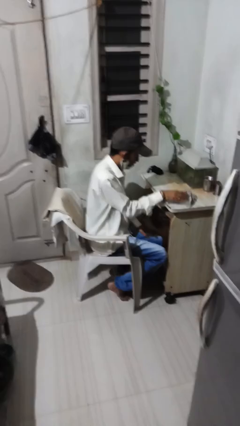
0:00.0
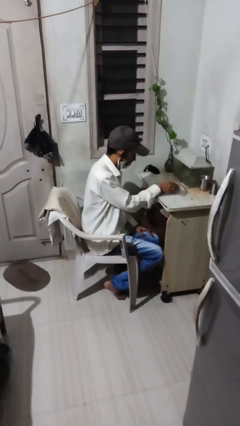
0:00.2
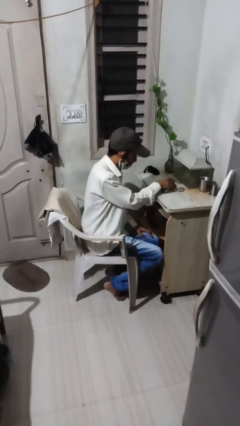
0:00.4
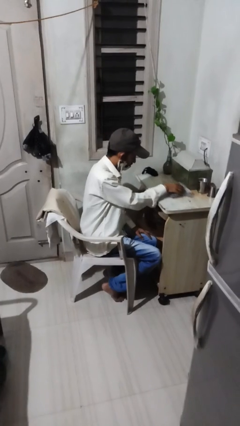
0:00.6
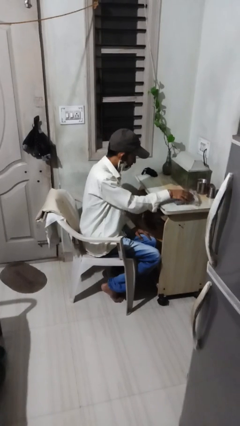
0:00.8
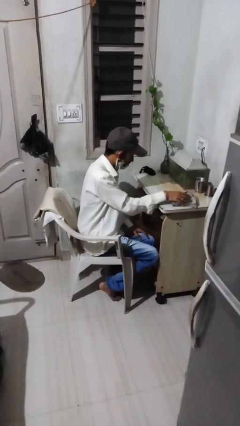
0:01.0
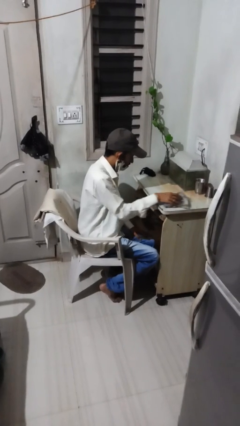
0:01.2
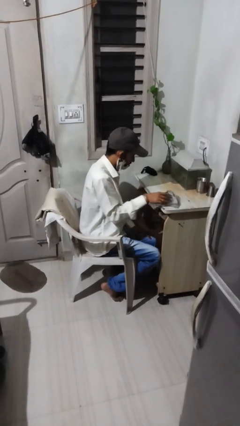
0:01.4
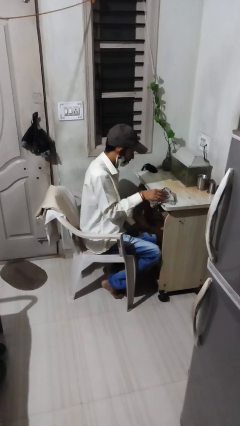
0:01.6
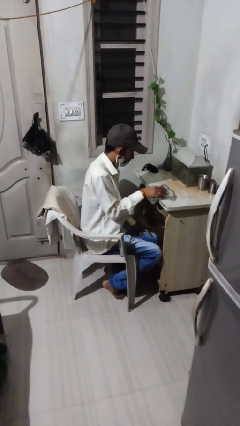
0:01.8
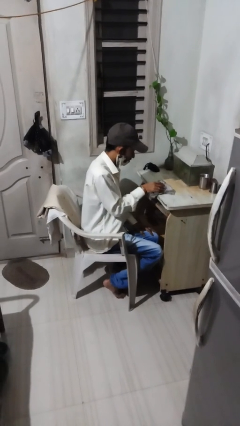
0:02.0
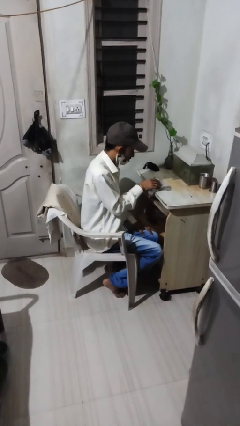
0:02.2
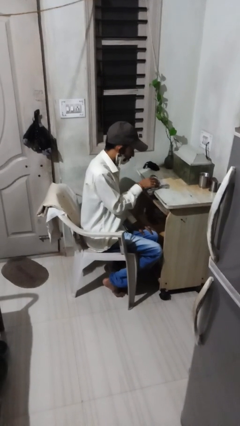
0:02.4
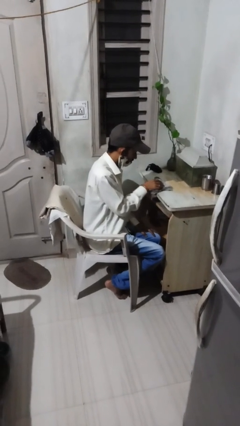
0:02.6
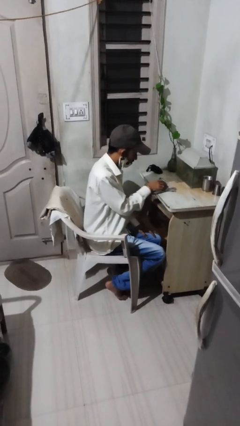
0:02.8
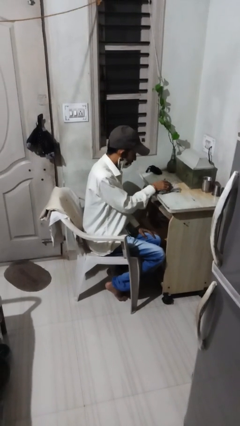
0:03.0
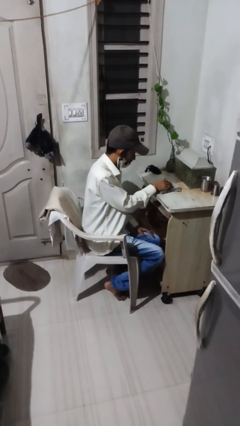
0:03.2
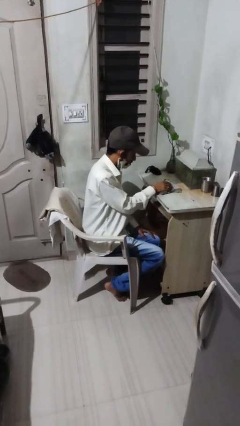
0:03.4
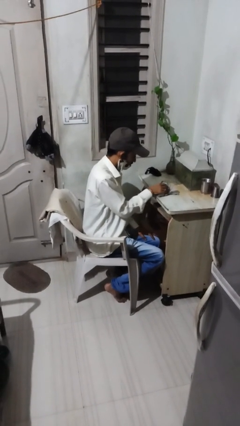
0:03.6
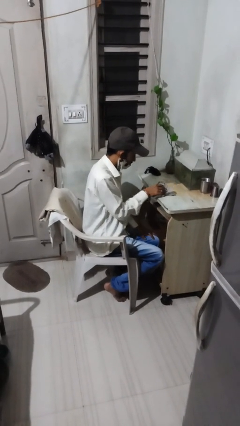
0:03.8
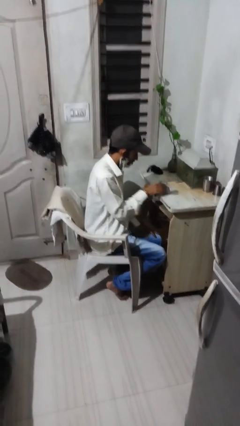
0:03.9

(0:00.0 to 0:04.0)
person cleans table with rag

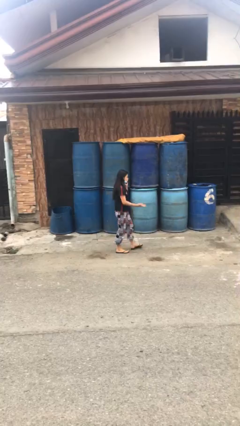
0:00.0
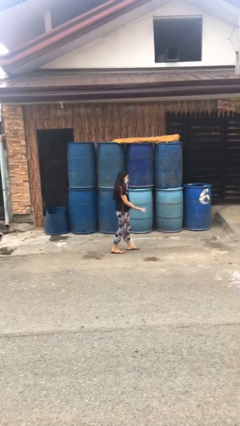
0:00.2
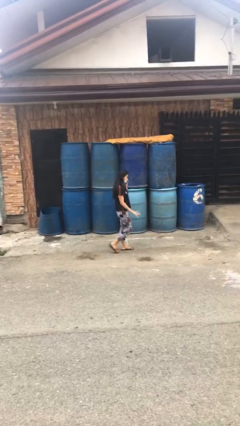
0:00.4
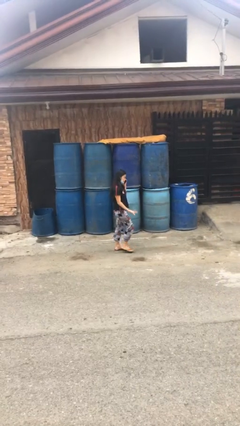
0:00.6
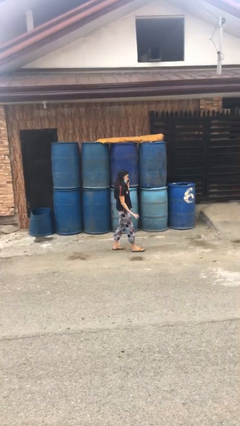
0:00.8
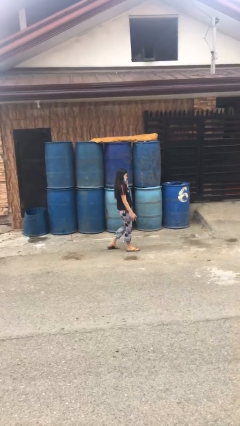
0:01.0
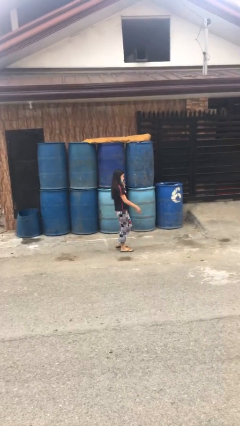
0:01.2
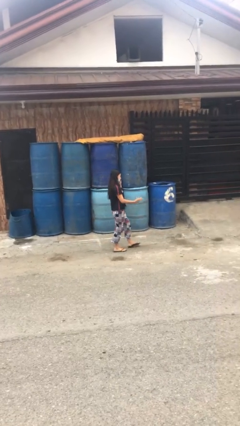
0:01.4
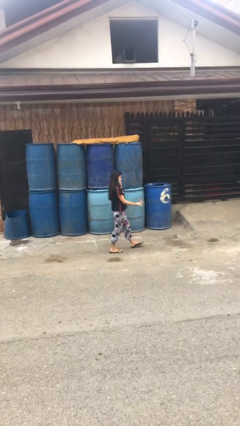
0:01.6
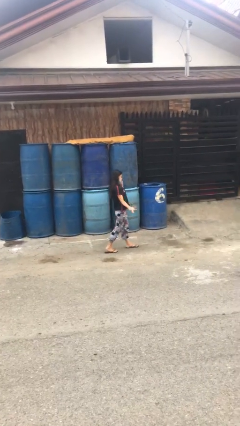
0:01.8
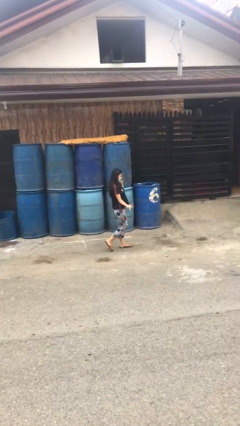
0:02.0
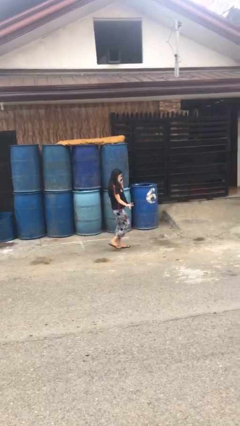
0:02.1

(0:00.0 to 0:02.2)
person talks on phone

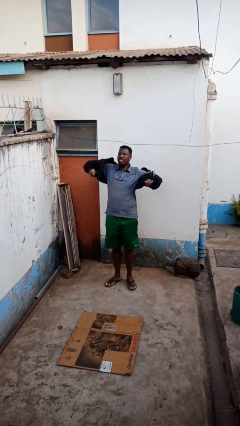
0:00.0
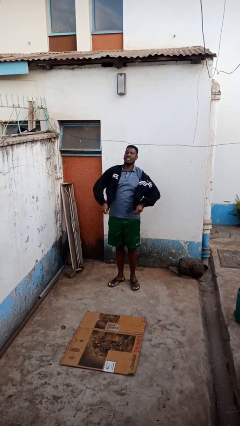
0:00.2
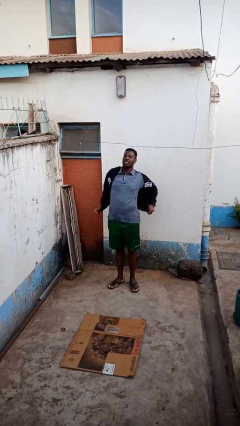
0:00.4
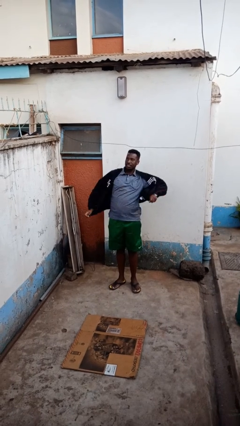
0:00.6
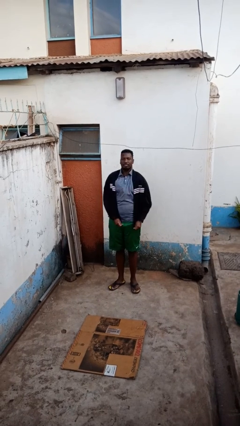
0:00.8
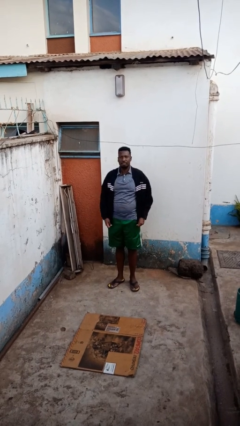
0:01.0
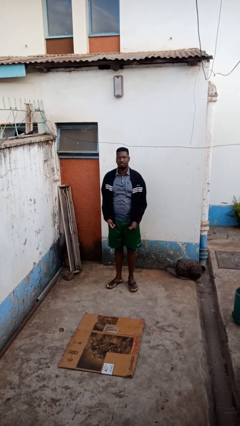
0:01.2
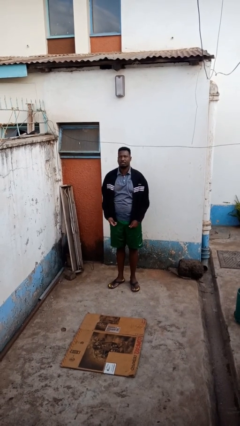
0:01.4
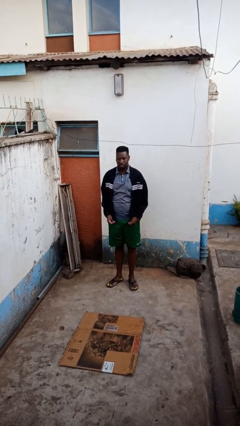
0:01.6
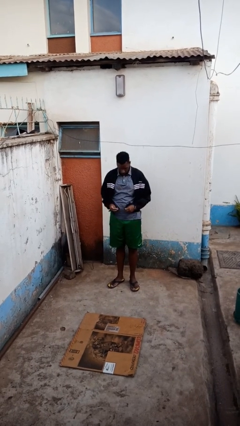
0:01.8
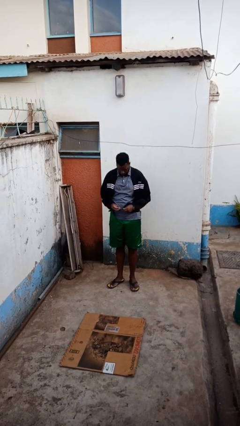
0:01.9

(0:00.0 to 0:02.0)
person puts on jacket

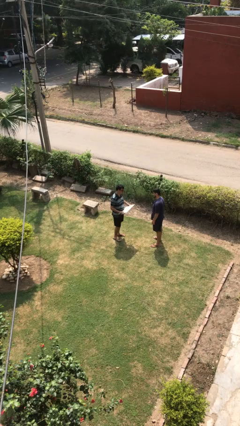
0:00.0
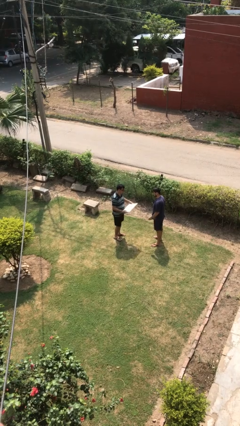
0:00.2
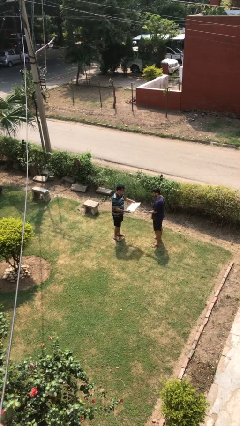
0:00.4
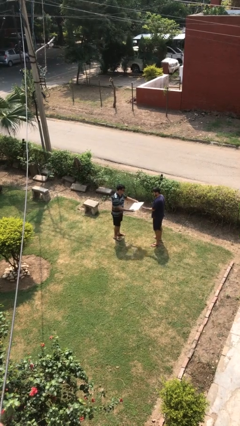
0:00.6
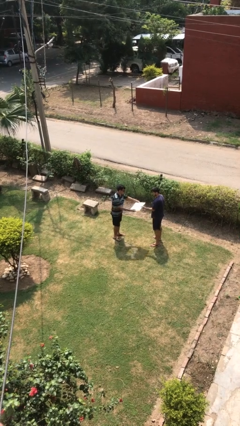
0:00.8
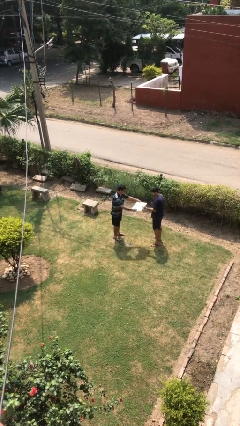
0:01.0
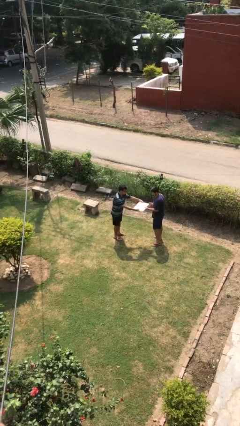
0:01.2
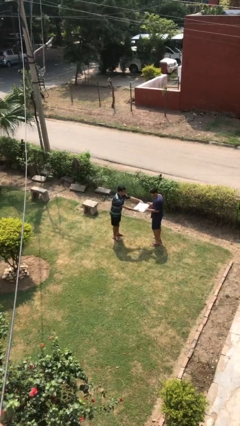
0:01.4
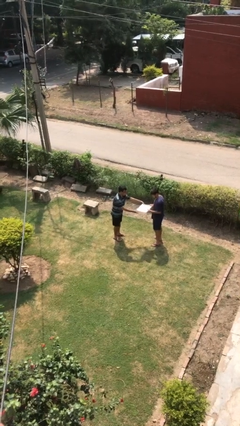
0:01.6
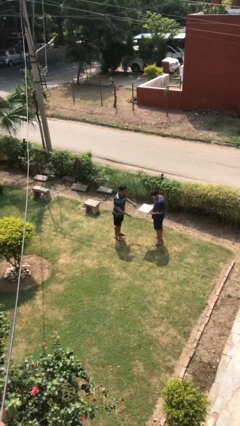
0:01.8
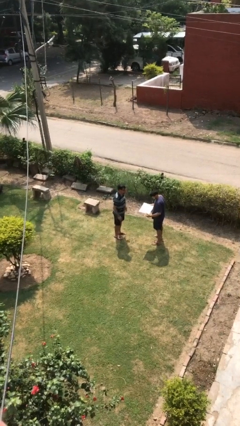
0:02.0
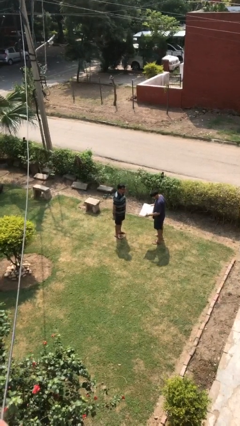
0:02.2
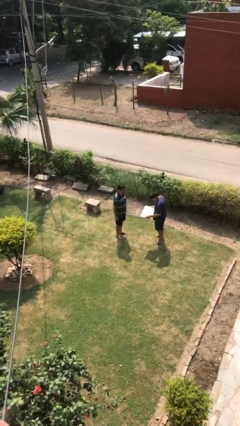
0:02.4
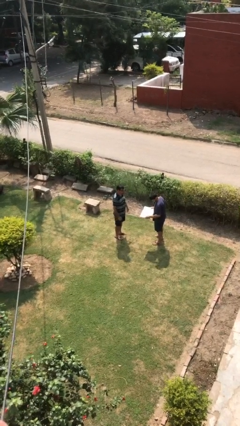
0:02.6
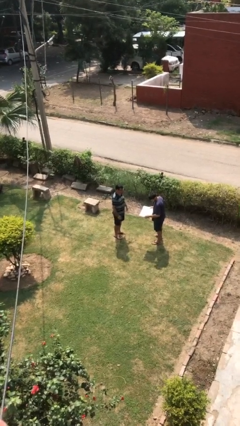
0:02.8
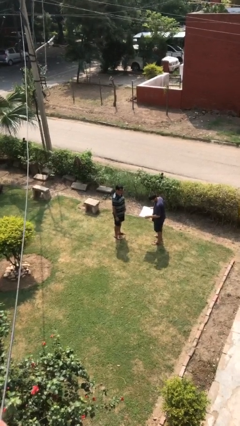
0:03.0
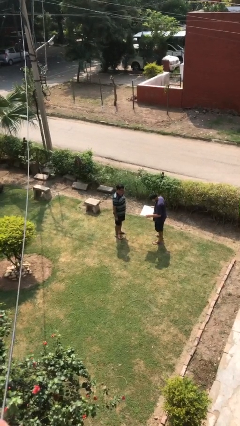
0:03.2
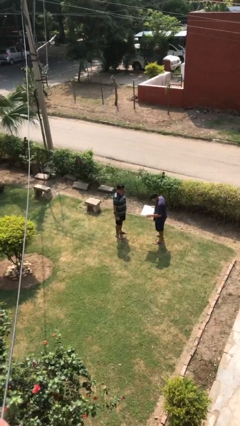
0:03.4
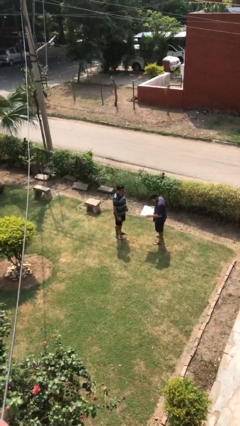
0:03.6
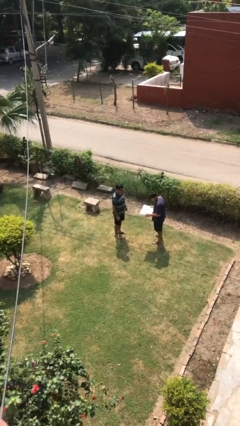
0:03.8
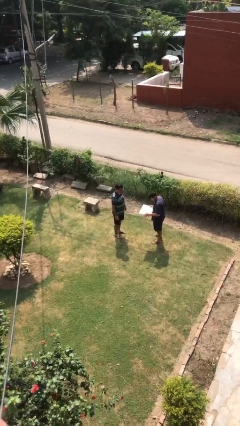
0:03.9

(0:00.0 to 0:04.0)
person transfers object to person

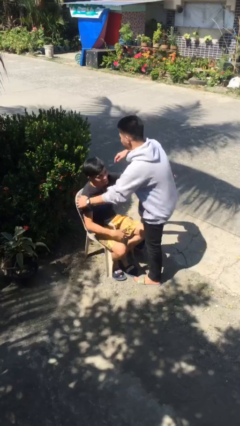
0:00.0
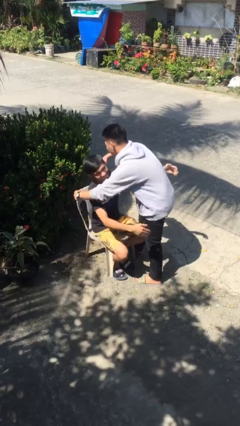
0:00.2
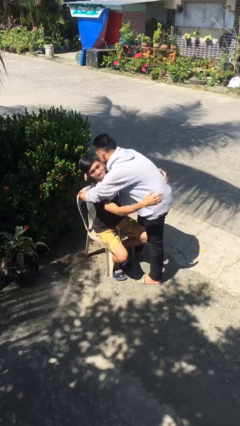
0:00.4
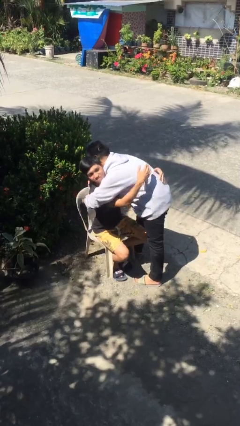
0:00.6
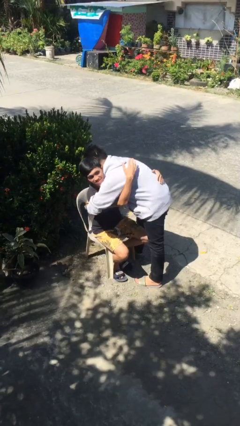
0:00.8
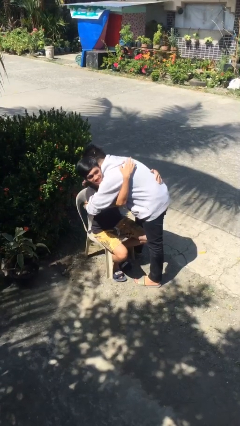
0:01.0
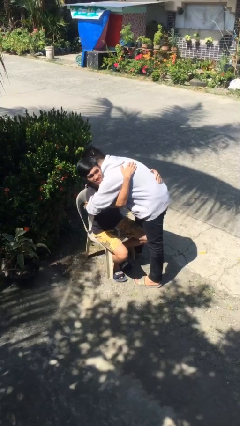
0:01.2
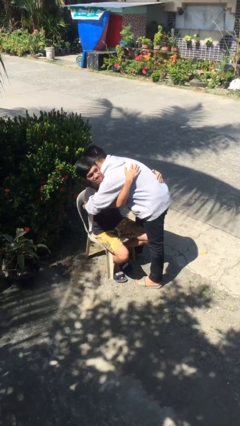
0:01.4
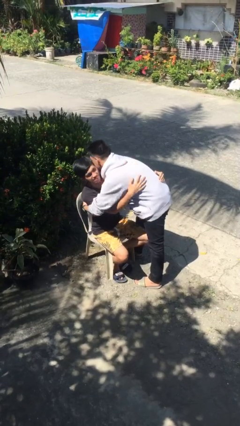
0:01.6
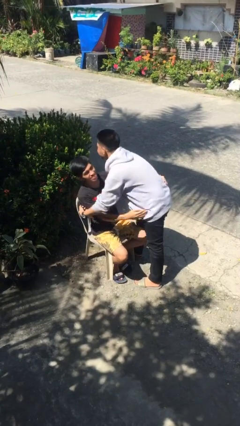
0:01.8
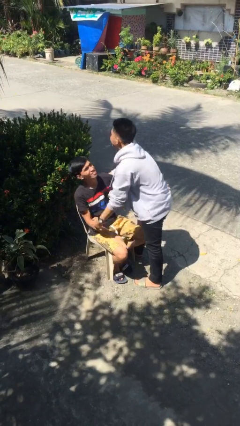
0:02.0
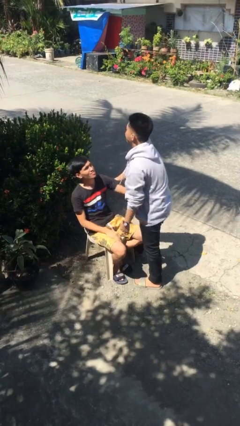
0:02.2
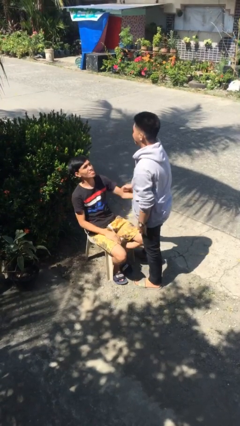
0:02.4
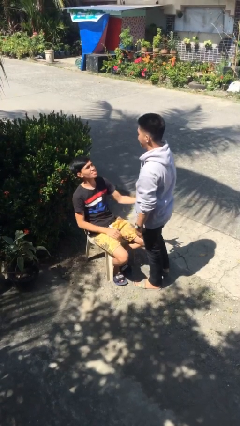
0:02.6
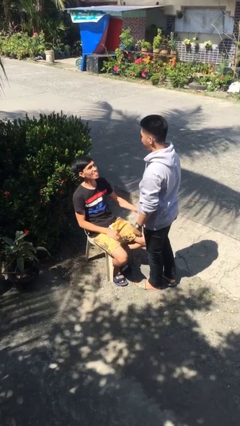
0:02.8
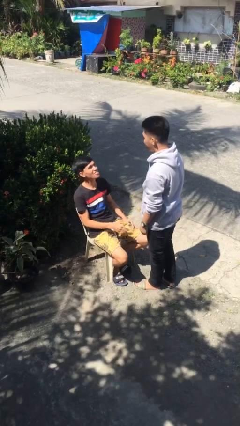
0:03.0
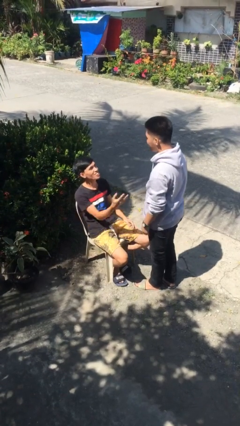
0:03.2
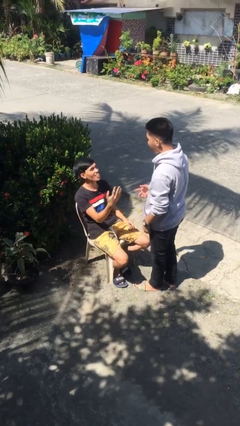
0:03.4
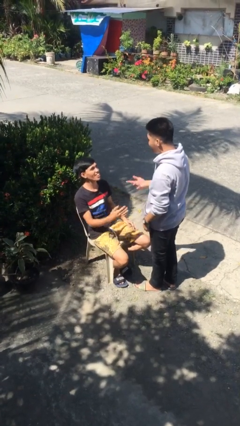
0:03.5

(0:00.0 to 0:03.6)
person embraces person

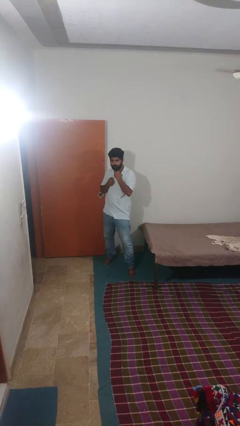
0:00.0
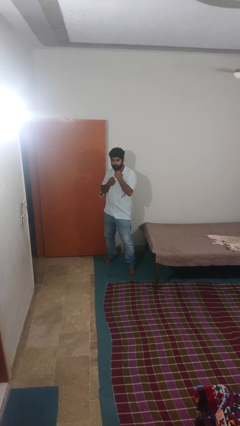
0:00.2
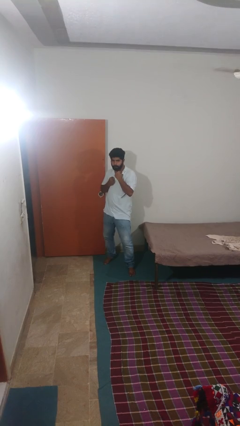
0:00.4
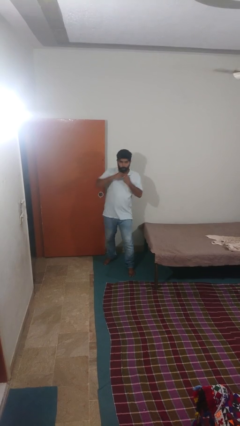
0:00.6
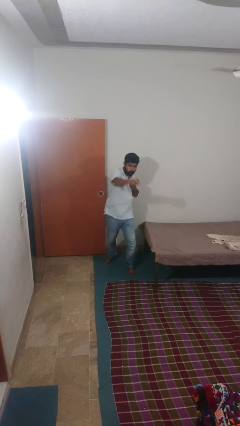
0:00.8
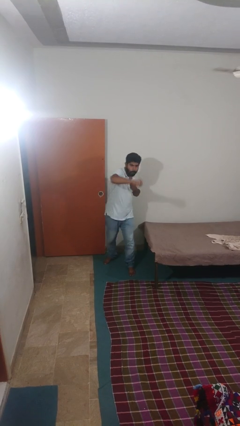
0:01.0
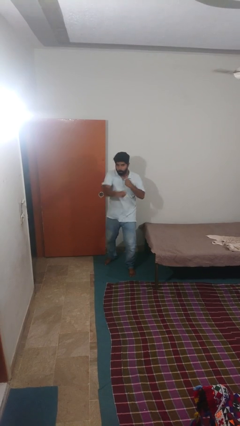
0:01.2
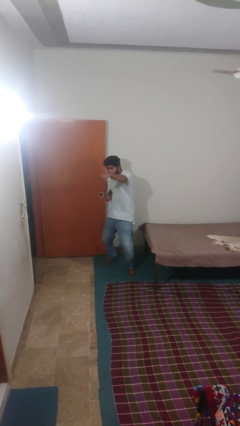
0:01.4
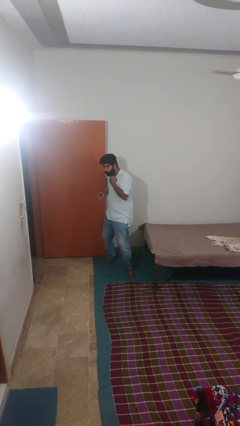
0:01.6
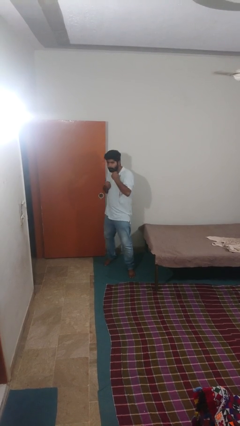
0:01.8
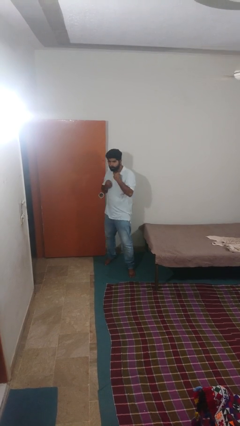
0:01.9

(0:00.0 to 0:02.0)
person punches
